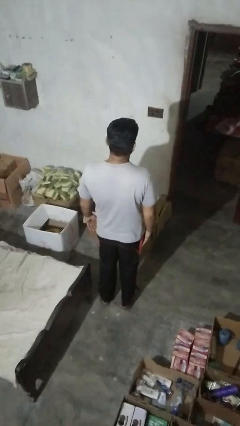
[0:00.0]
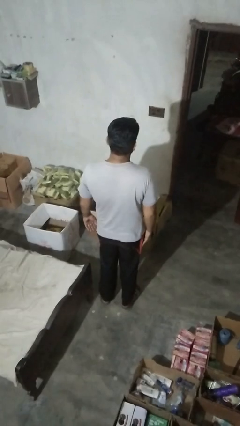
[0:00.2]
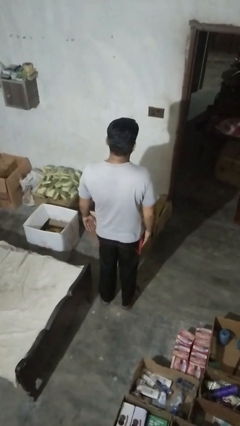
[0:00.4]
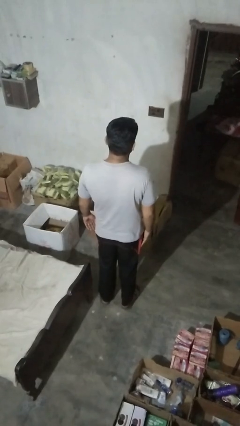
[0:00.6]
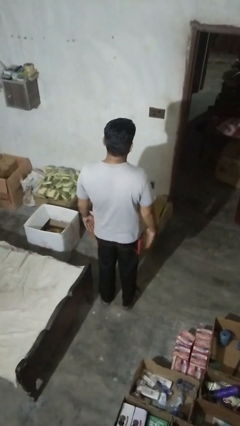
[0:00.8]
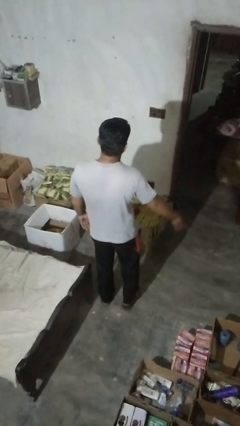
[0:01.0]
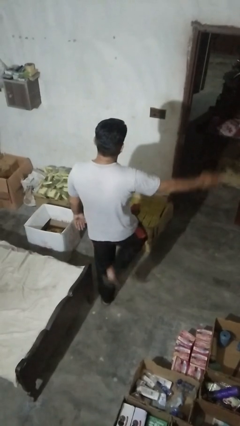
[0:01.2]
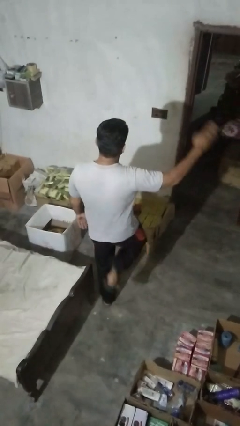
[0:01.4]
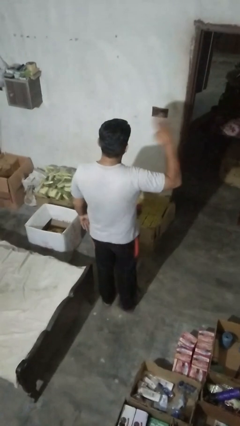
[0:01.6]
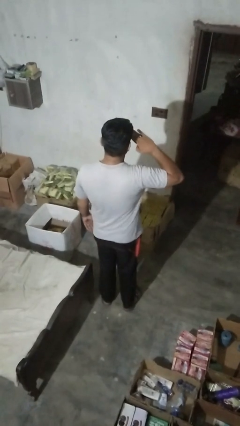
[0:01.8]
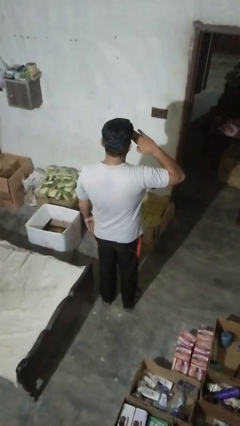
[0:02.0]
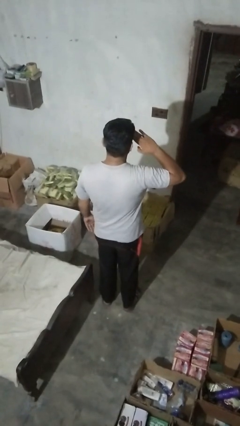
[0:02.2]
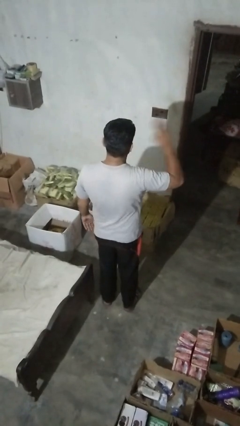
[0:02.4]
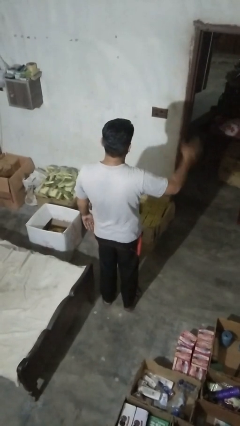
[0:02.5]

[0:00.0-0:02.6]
person salutes

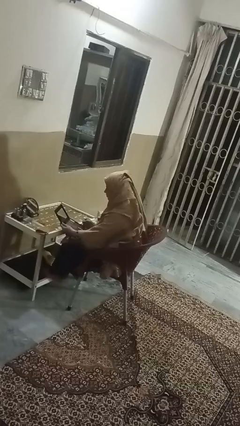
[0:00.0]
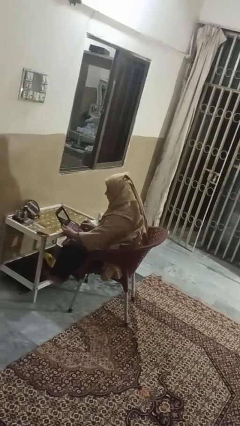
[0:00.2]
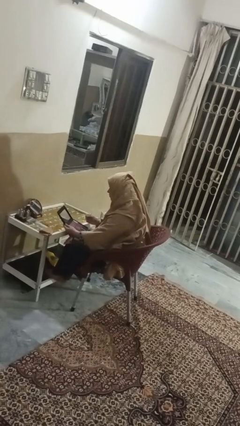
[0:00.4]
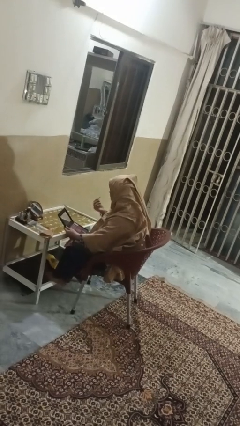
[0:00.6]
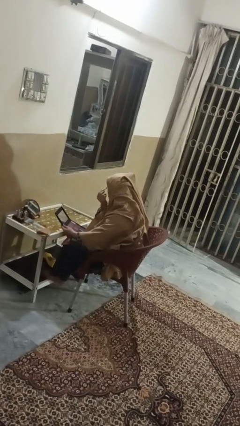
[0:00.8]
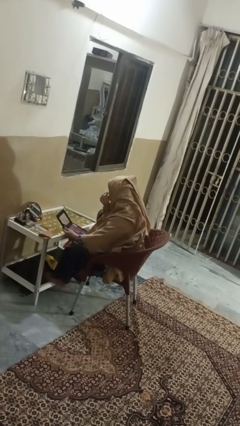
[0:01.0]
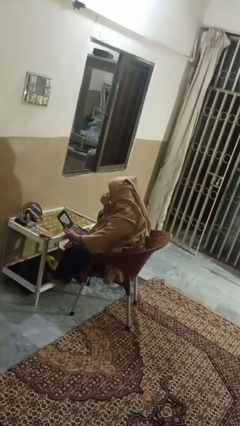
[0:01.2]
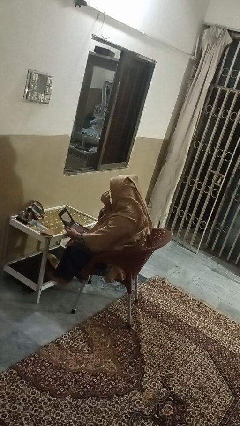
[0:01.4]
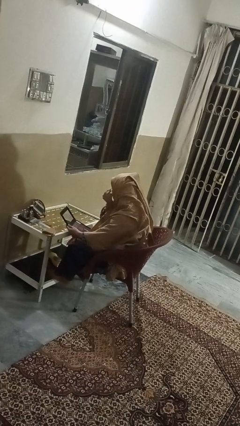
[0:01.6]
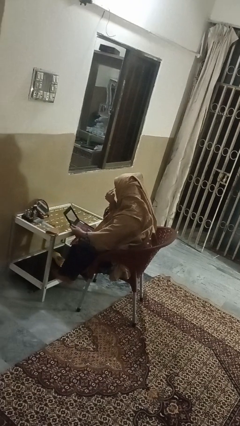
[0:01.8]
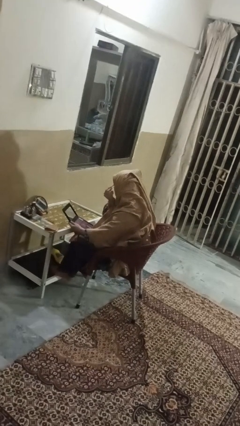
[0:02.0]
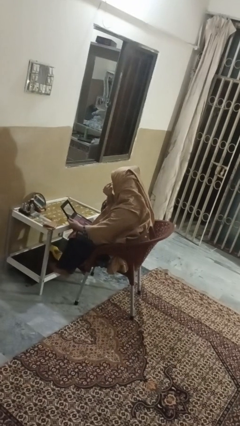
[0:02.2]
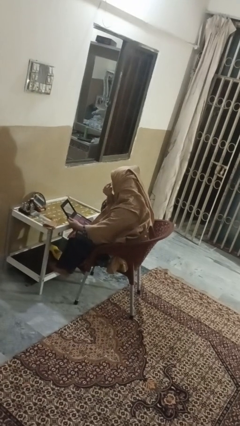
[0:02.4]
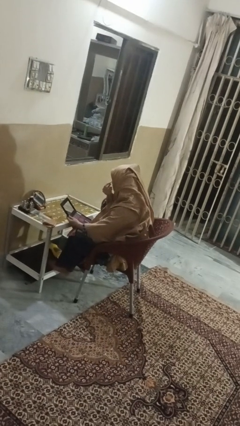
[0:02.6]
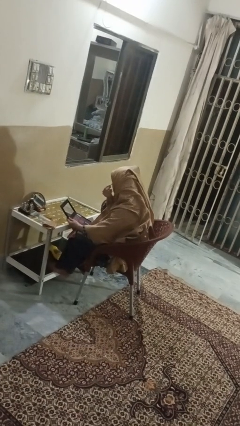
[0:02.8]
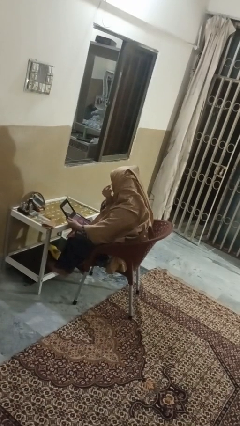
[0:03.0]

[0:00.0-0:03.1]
person applies eye makeup

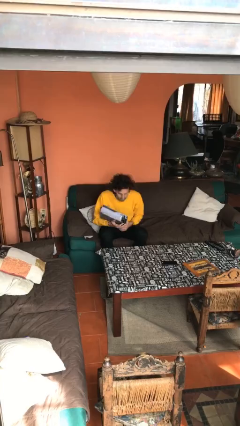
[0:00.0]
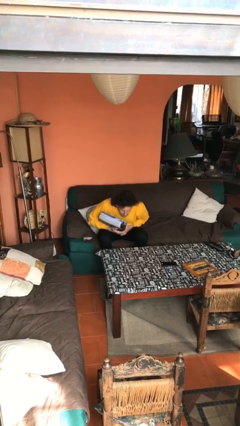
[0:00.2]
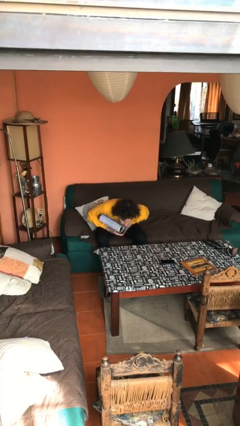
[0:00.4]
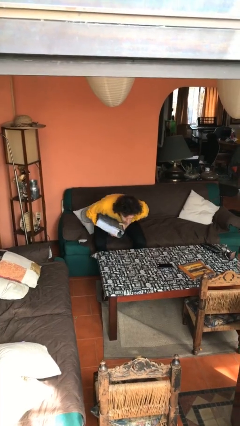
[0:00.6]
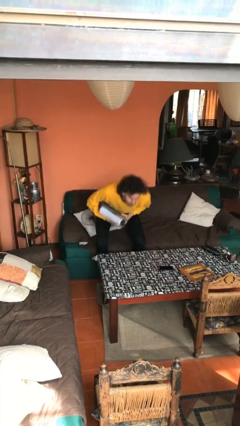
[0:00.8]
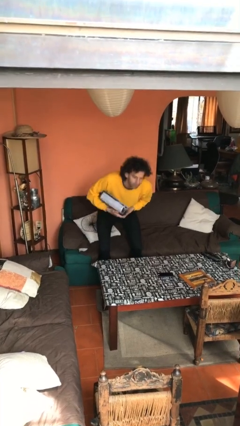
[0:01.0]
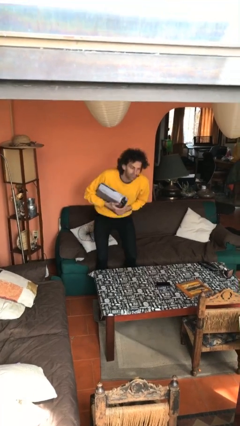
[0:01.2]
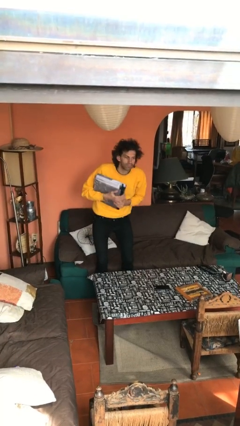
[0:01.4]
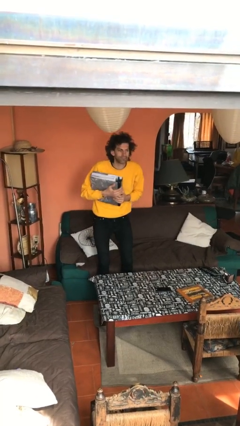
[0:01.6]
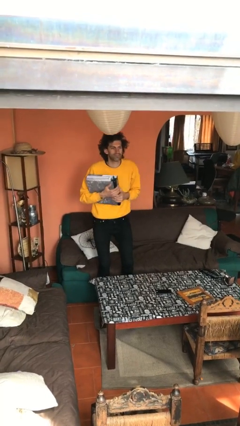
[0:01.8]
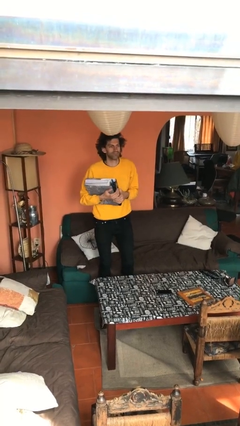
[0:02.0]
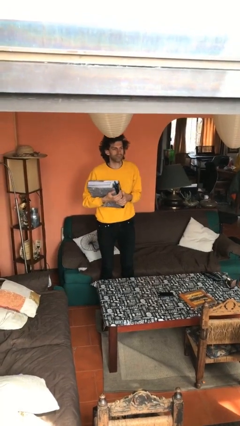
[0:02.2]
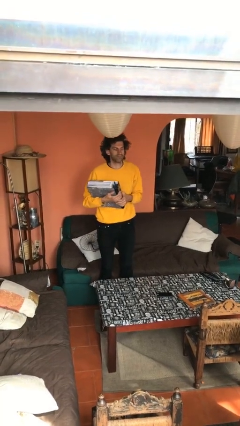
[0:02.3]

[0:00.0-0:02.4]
person stands up

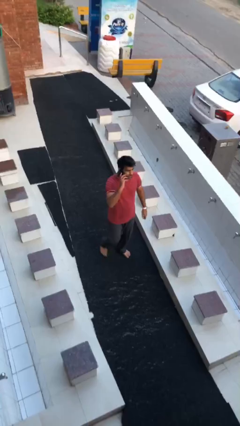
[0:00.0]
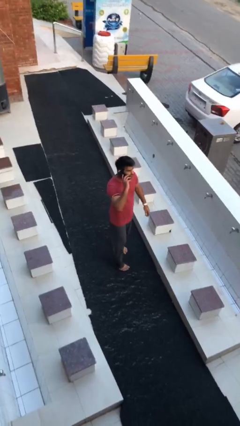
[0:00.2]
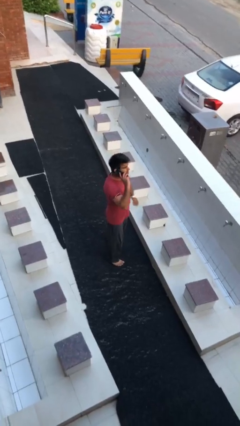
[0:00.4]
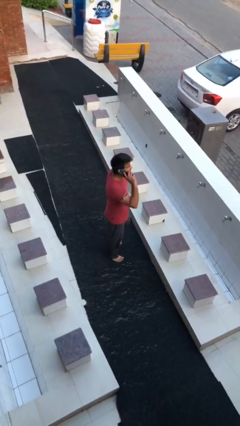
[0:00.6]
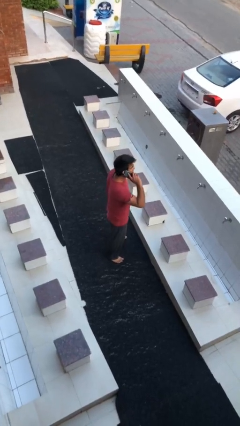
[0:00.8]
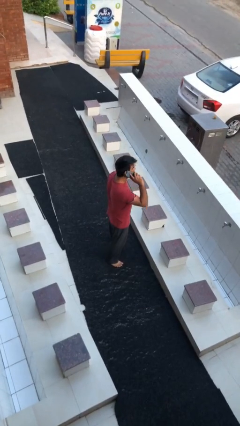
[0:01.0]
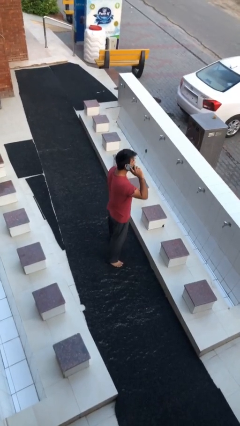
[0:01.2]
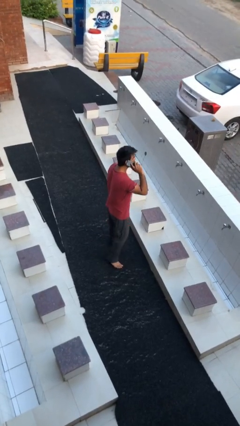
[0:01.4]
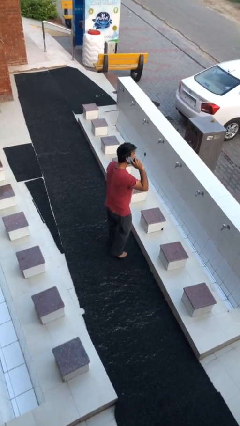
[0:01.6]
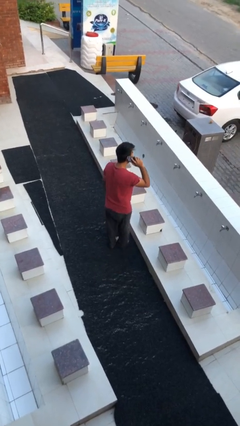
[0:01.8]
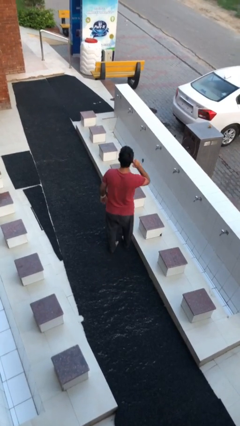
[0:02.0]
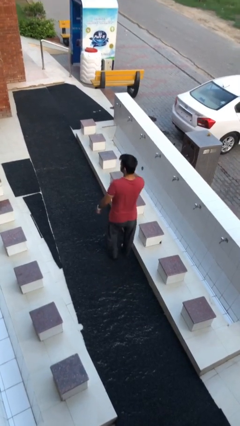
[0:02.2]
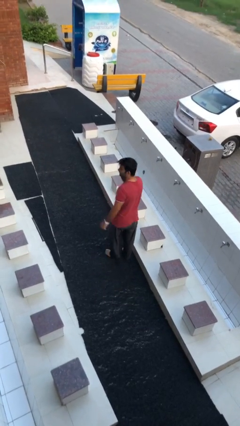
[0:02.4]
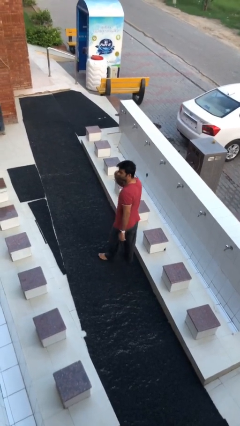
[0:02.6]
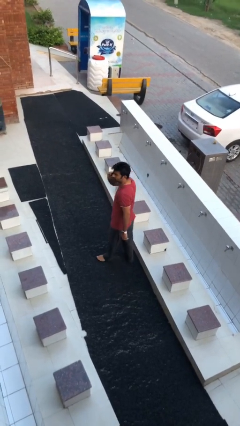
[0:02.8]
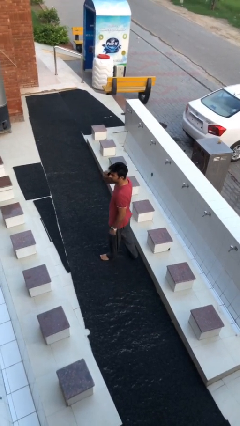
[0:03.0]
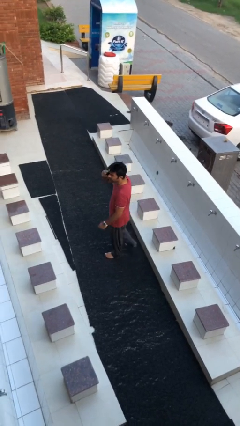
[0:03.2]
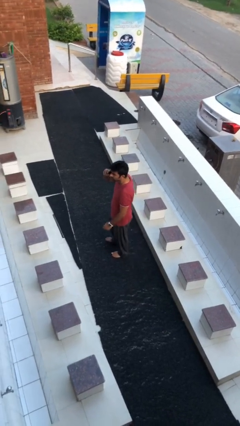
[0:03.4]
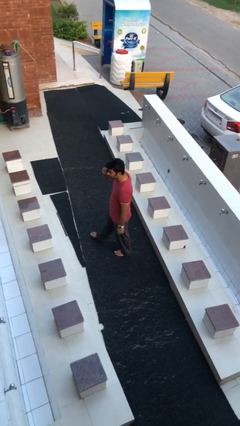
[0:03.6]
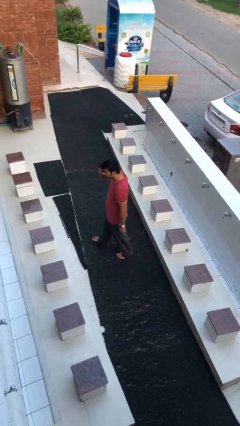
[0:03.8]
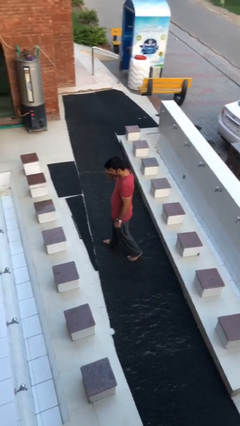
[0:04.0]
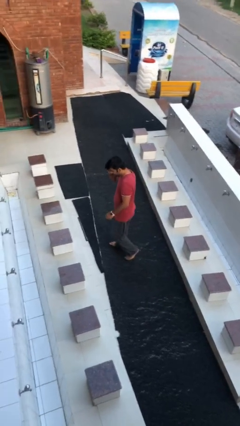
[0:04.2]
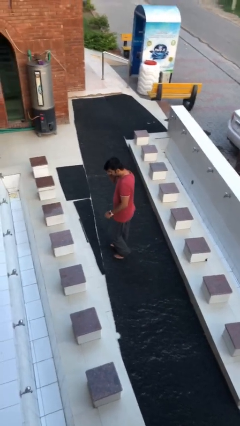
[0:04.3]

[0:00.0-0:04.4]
person talks on phone

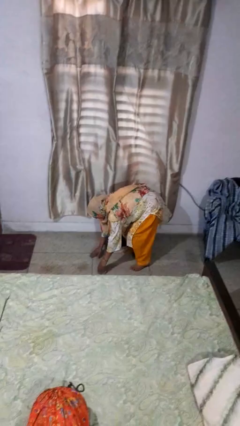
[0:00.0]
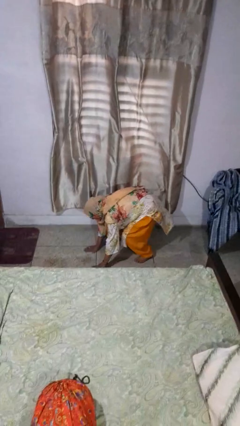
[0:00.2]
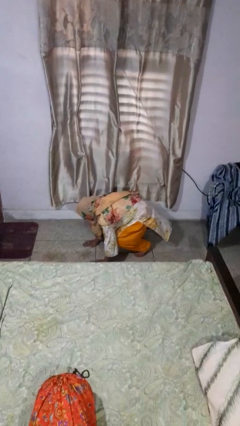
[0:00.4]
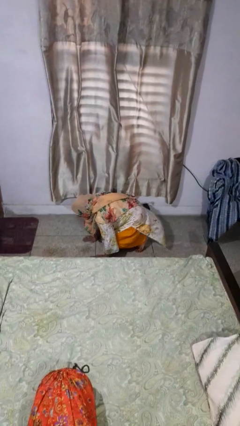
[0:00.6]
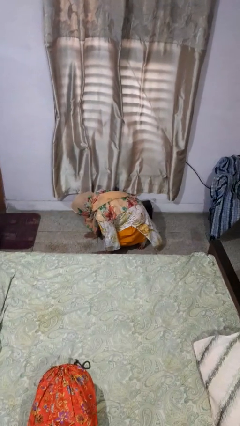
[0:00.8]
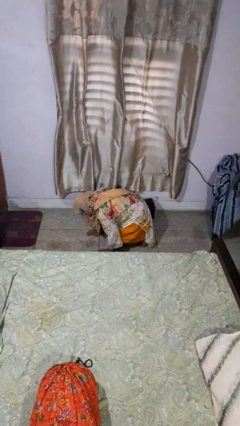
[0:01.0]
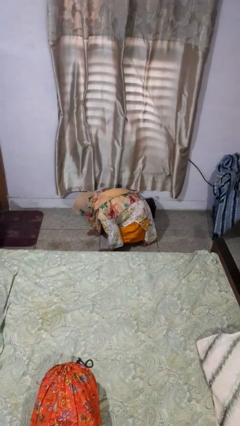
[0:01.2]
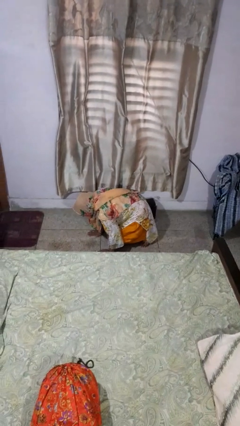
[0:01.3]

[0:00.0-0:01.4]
person lies down on floor

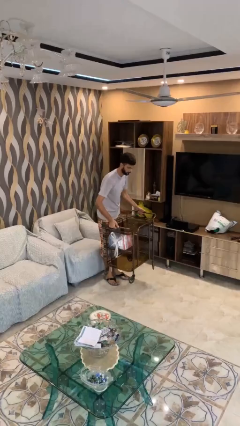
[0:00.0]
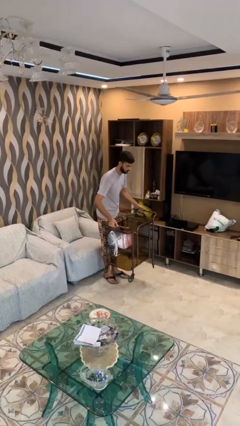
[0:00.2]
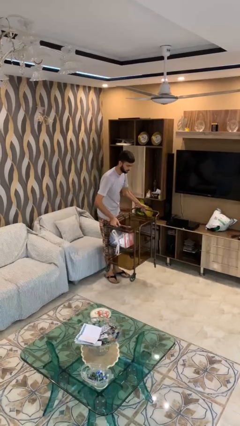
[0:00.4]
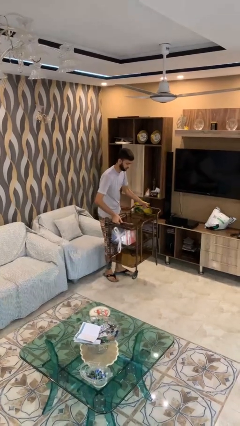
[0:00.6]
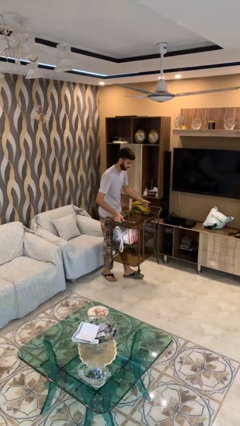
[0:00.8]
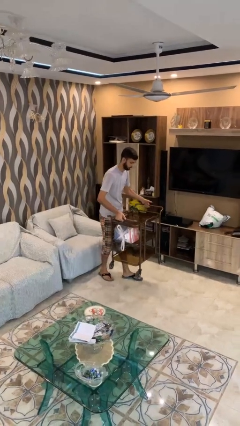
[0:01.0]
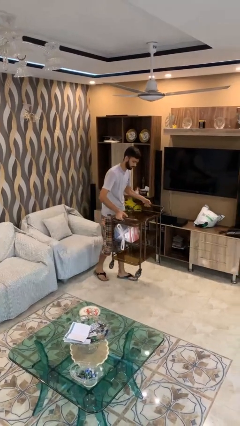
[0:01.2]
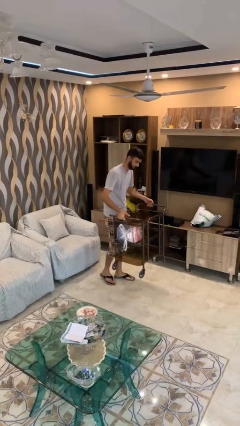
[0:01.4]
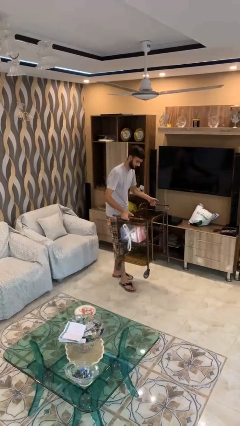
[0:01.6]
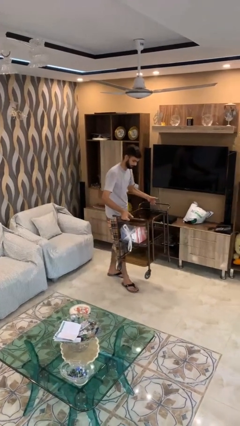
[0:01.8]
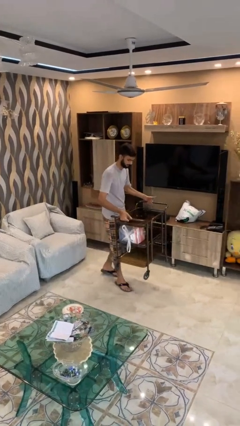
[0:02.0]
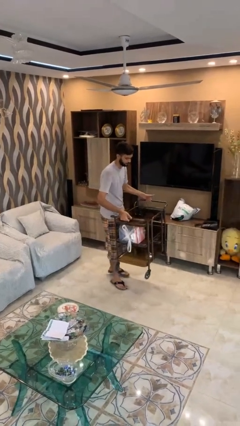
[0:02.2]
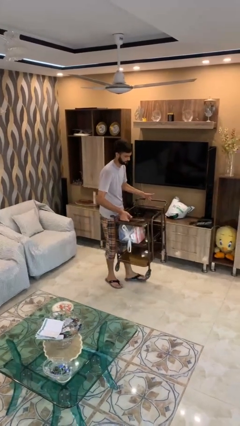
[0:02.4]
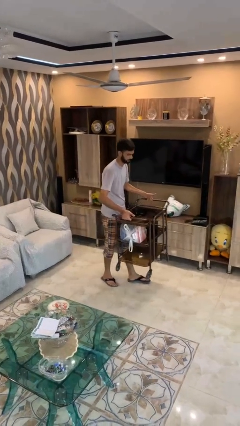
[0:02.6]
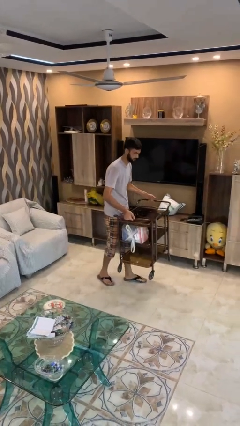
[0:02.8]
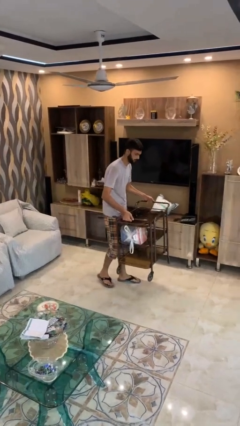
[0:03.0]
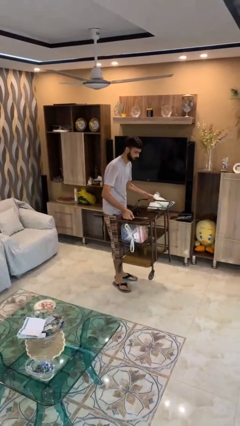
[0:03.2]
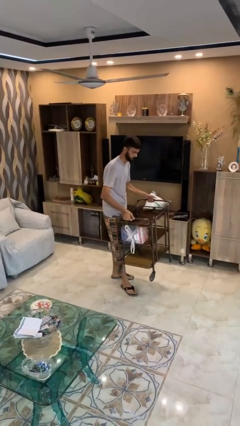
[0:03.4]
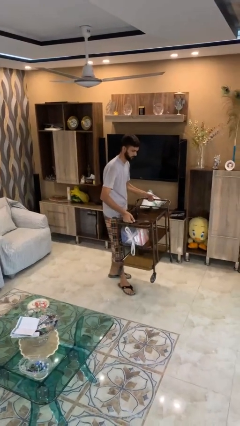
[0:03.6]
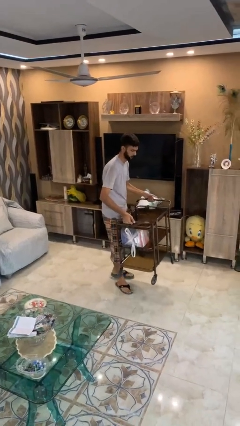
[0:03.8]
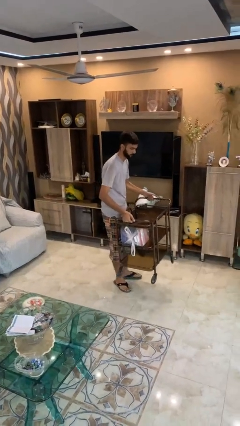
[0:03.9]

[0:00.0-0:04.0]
person carries heavy object
